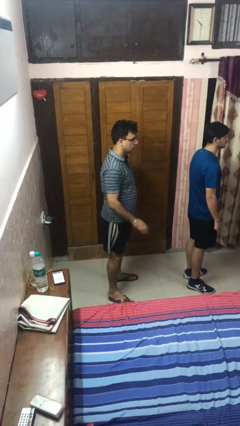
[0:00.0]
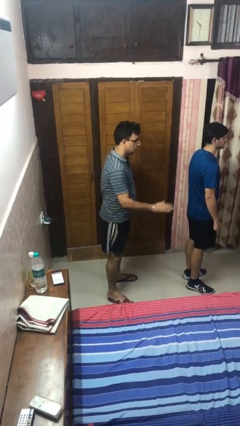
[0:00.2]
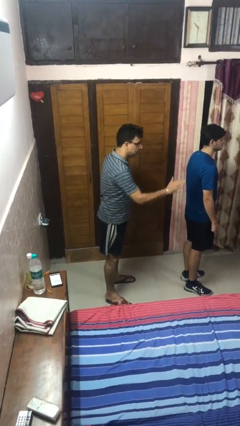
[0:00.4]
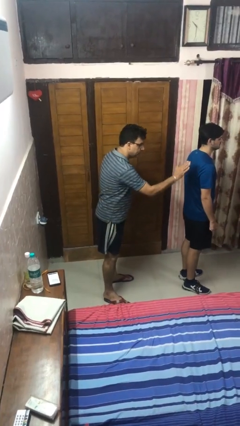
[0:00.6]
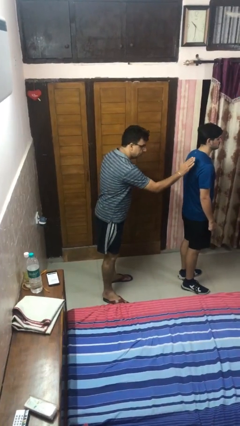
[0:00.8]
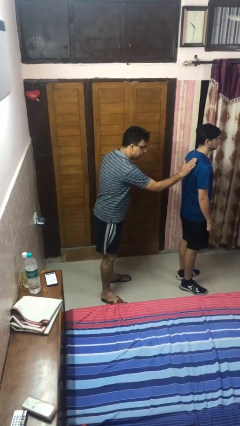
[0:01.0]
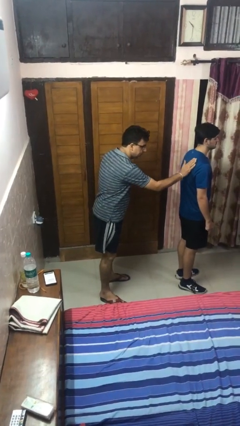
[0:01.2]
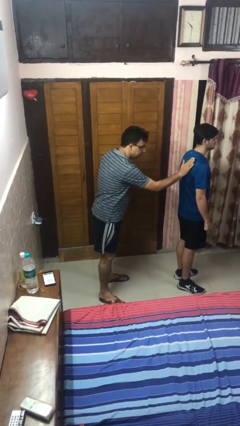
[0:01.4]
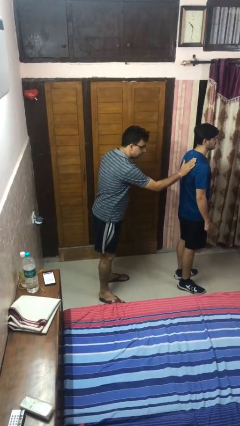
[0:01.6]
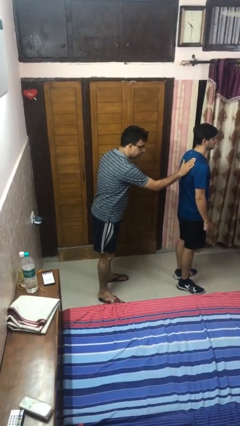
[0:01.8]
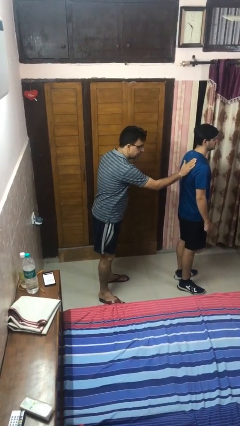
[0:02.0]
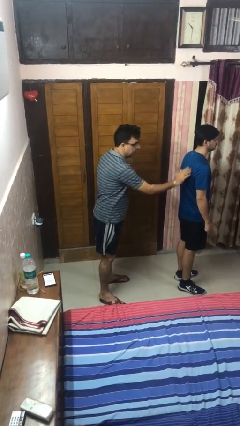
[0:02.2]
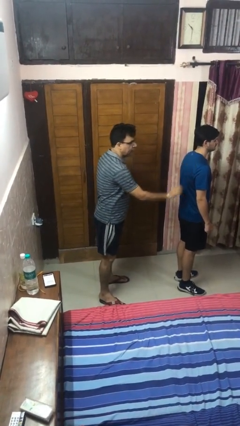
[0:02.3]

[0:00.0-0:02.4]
person touches back of person

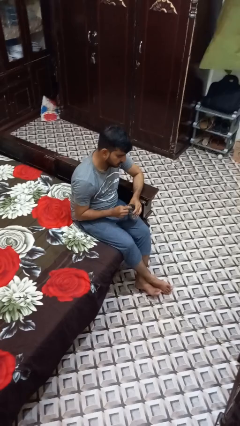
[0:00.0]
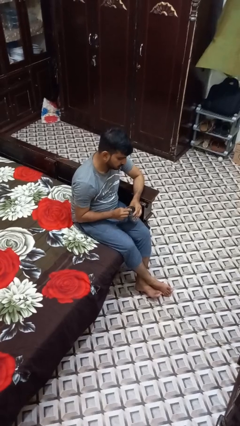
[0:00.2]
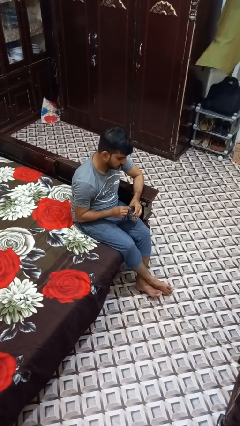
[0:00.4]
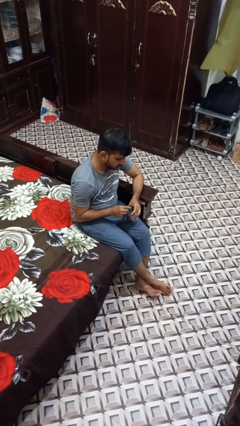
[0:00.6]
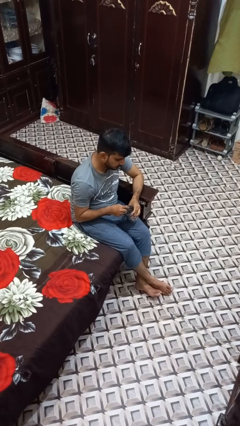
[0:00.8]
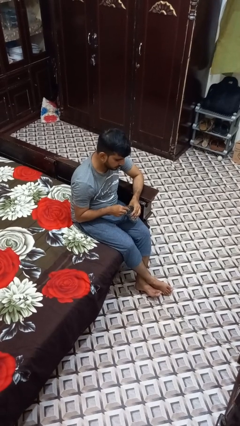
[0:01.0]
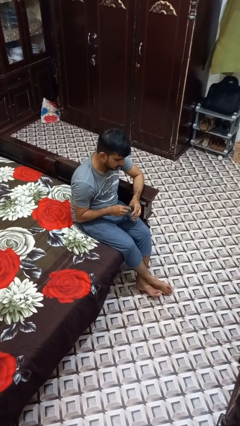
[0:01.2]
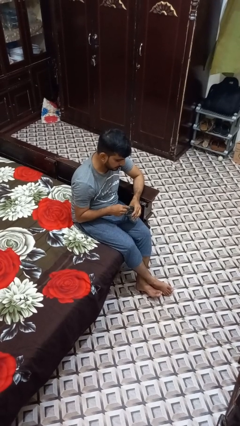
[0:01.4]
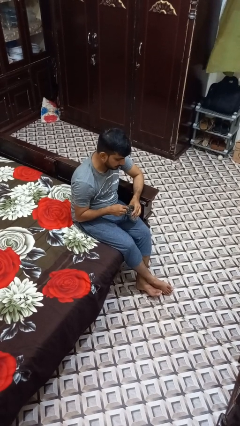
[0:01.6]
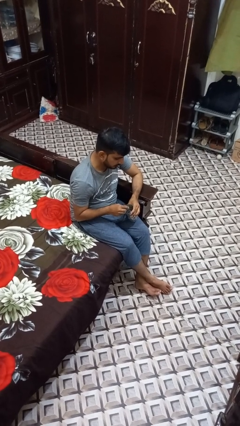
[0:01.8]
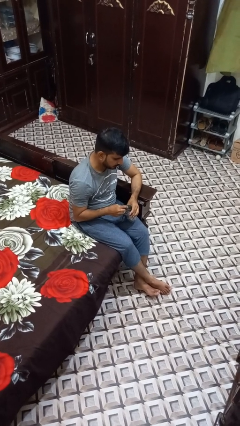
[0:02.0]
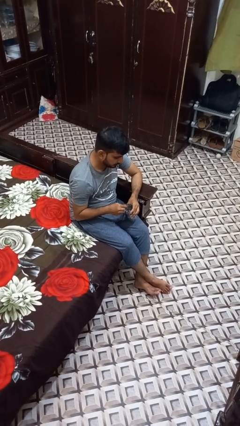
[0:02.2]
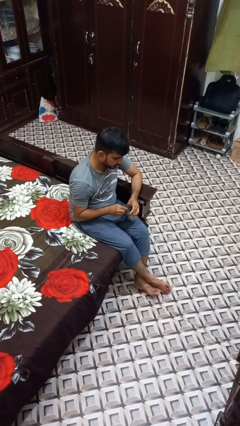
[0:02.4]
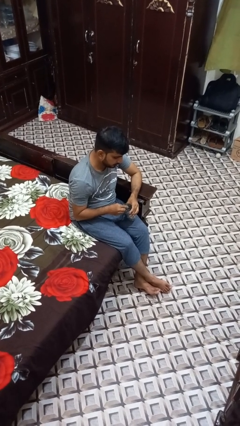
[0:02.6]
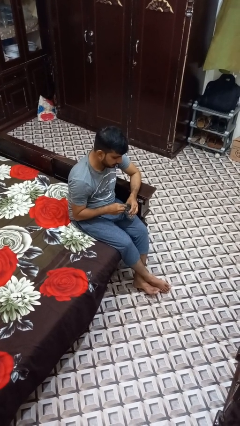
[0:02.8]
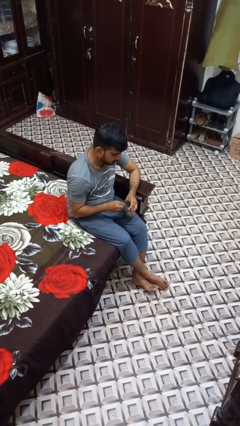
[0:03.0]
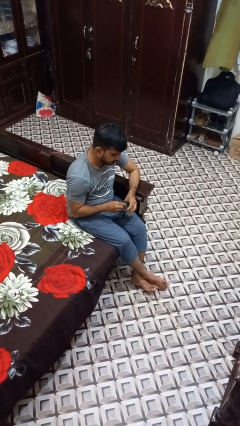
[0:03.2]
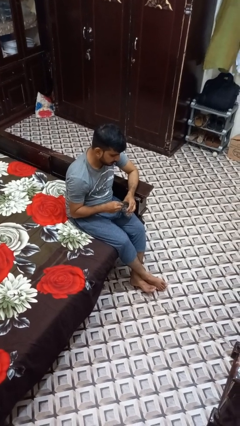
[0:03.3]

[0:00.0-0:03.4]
person stirs mug

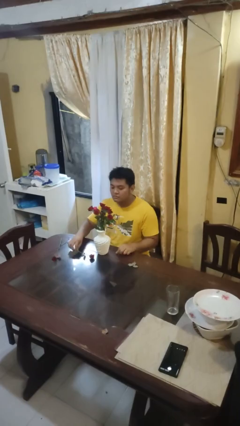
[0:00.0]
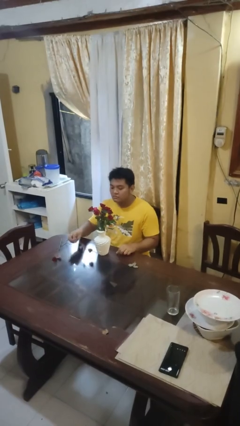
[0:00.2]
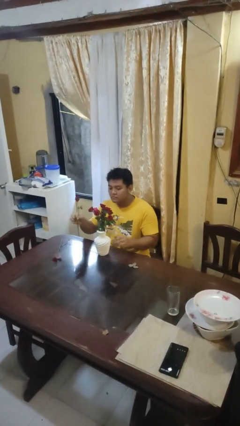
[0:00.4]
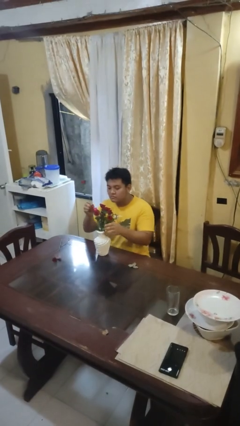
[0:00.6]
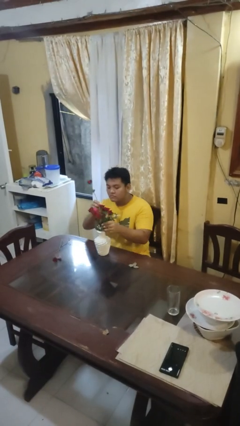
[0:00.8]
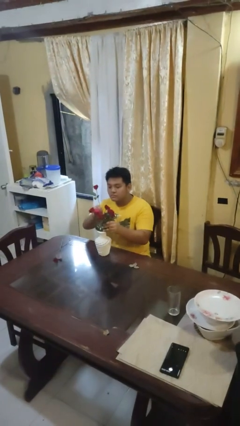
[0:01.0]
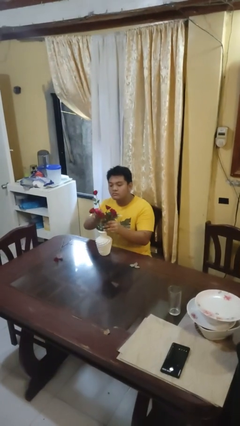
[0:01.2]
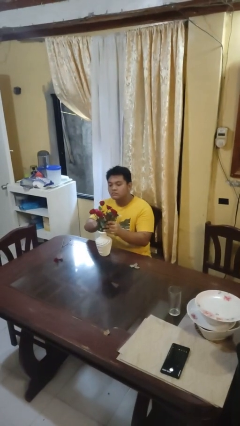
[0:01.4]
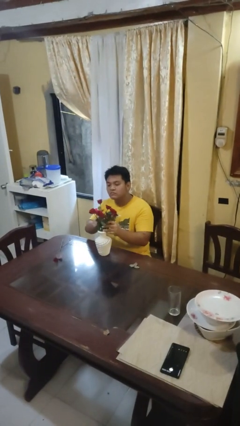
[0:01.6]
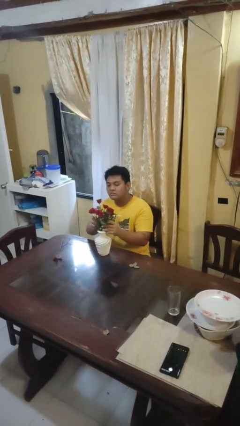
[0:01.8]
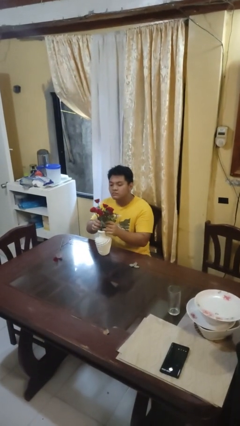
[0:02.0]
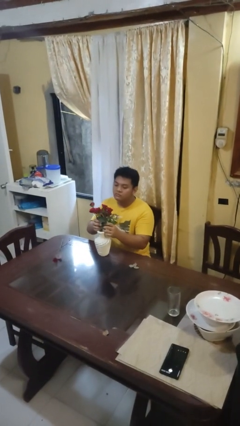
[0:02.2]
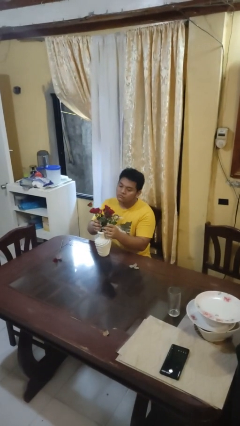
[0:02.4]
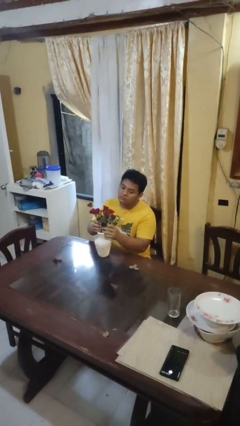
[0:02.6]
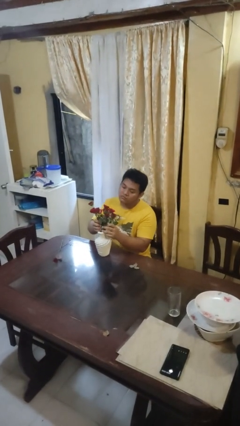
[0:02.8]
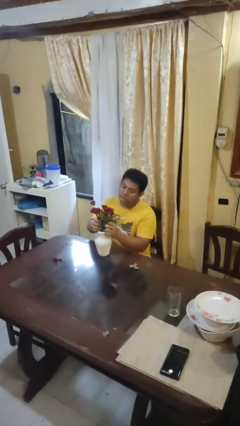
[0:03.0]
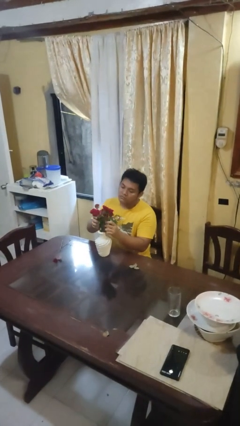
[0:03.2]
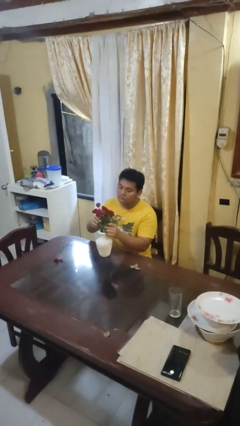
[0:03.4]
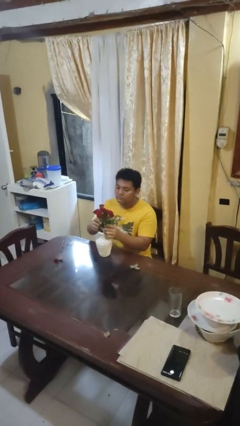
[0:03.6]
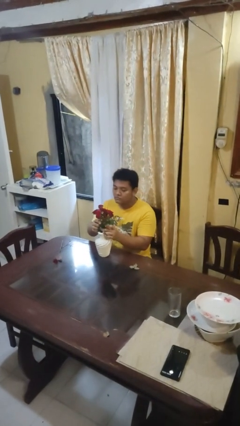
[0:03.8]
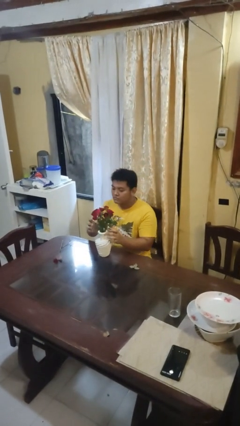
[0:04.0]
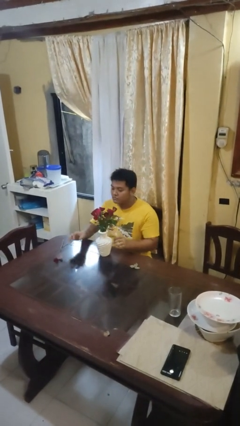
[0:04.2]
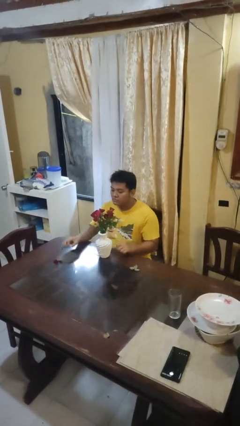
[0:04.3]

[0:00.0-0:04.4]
person arranges flowers in vase

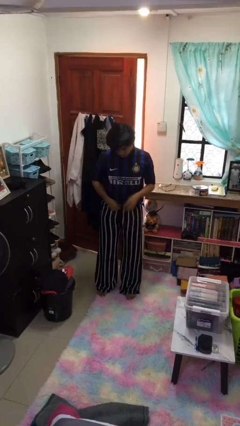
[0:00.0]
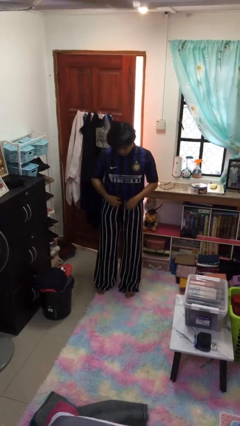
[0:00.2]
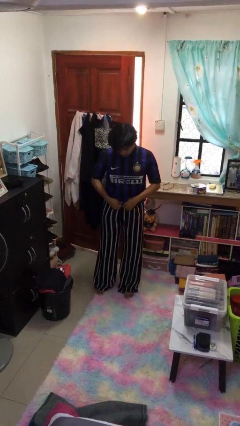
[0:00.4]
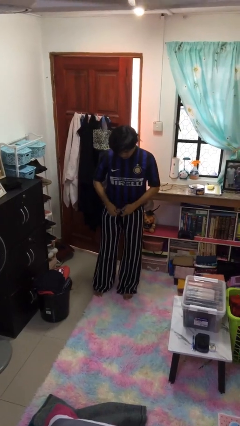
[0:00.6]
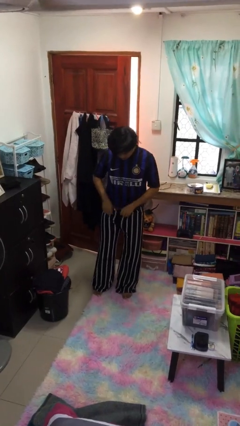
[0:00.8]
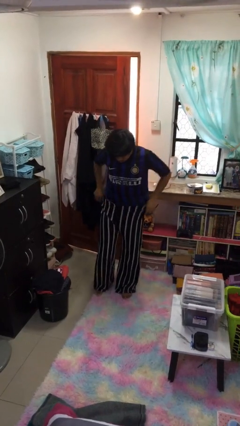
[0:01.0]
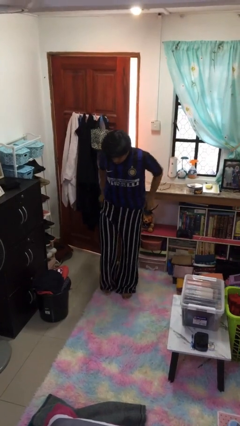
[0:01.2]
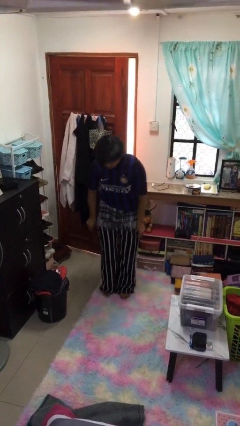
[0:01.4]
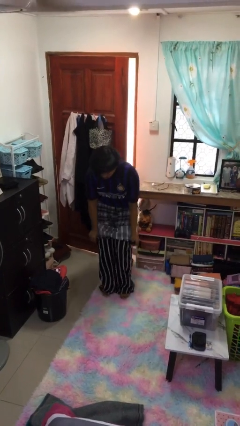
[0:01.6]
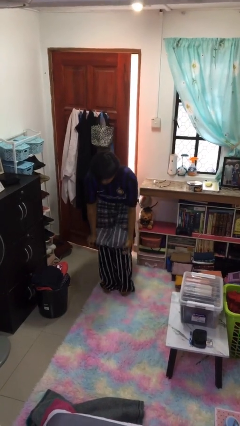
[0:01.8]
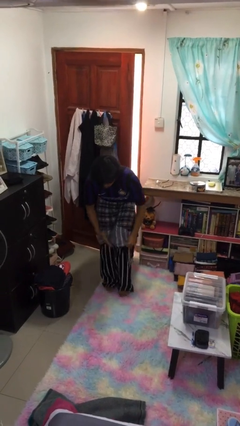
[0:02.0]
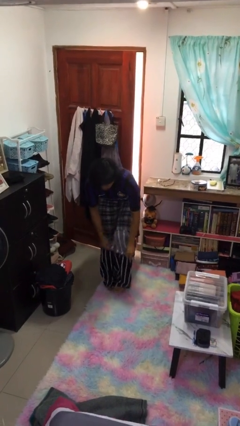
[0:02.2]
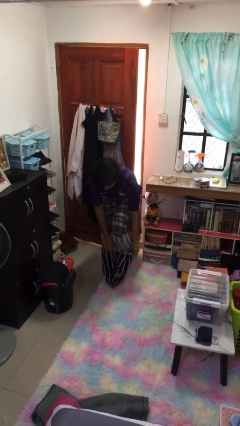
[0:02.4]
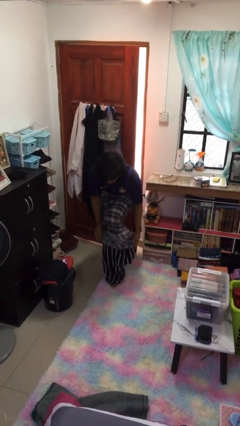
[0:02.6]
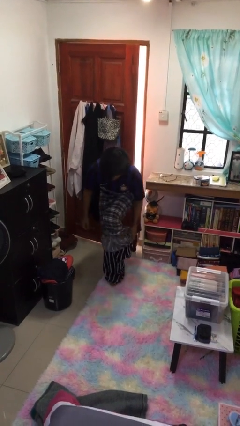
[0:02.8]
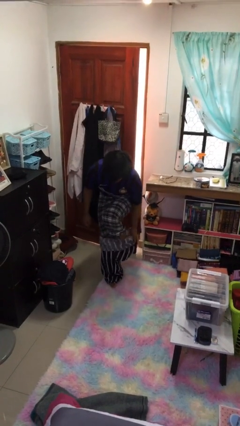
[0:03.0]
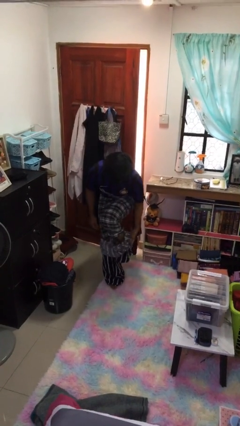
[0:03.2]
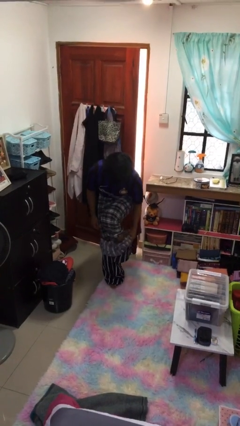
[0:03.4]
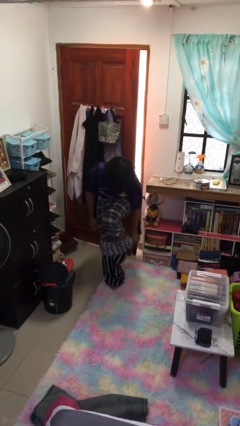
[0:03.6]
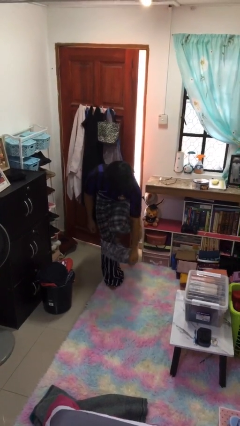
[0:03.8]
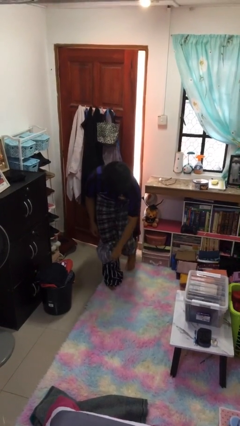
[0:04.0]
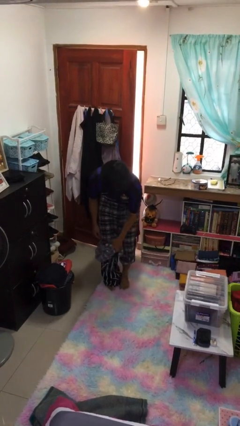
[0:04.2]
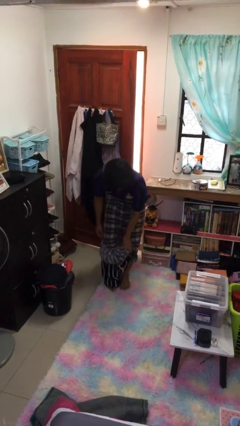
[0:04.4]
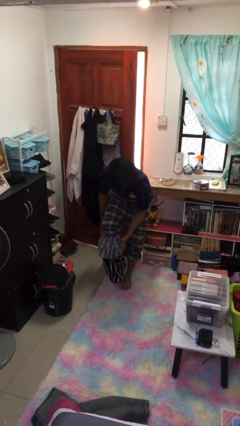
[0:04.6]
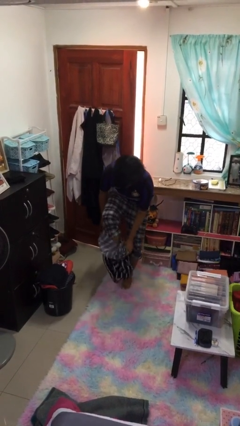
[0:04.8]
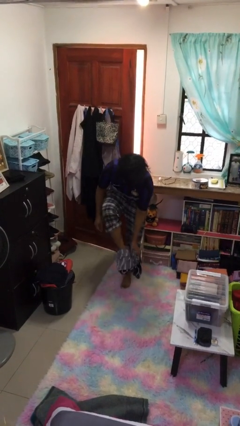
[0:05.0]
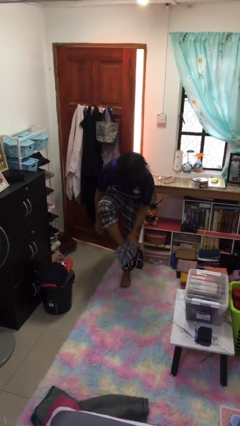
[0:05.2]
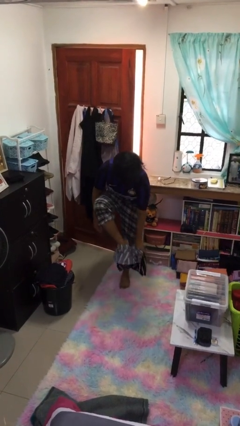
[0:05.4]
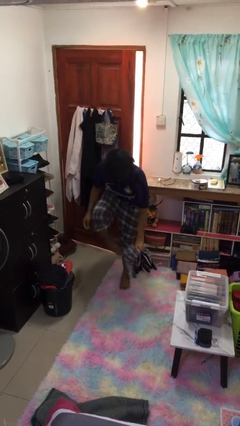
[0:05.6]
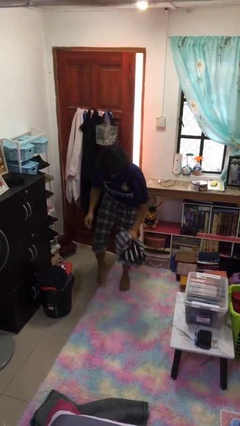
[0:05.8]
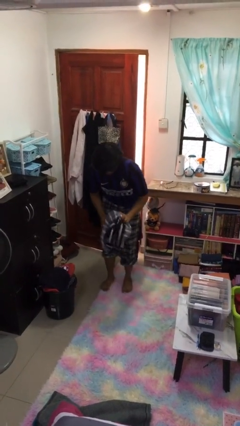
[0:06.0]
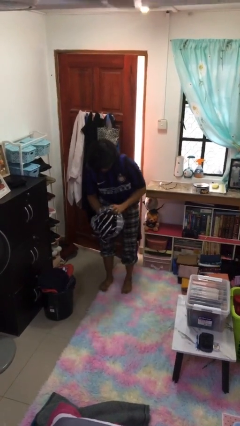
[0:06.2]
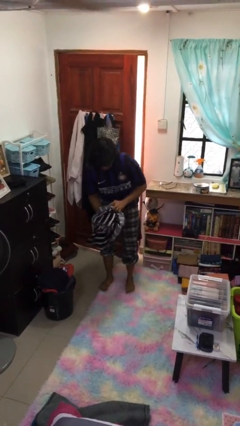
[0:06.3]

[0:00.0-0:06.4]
person takes off pants

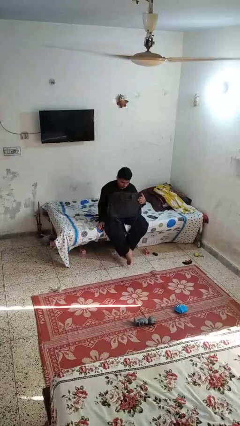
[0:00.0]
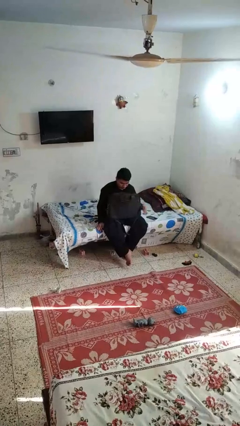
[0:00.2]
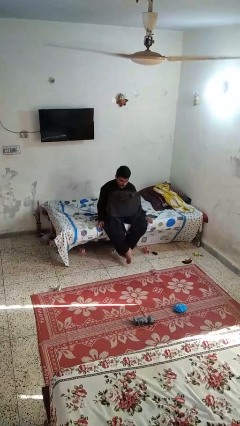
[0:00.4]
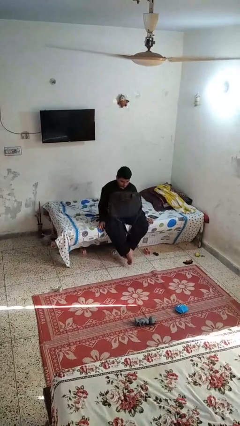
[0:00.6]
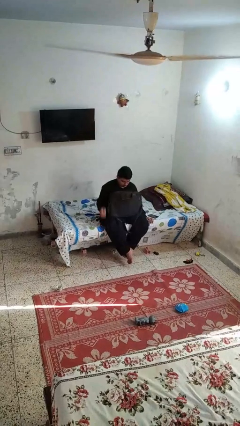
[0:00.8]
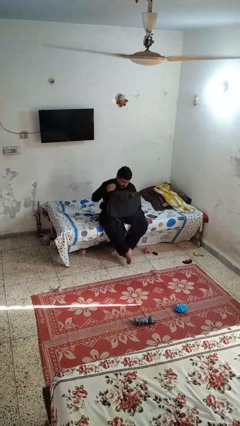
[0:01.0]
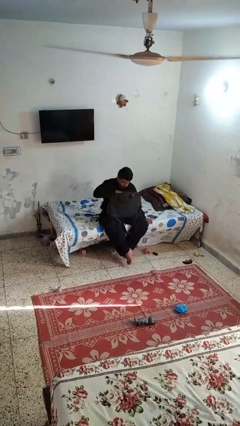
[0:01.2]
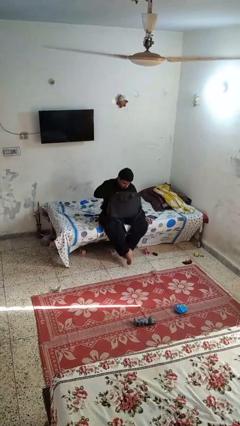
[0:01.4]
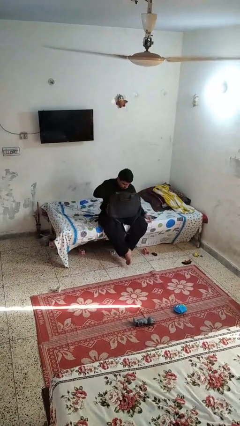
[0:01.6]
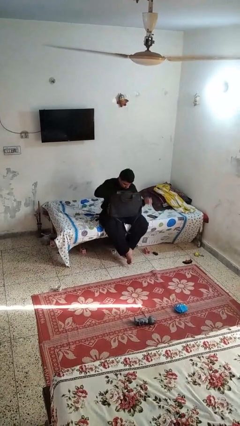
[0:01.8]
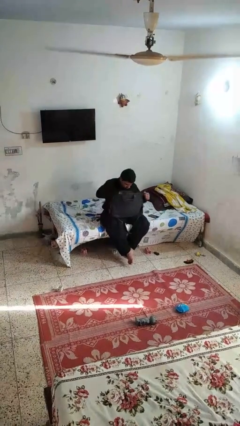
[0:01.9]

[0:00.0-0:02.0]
person searches in backpack
